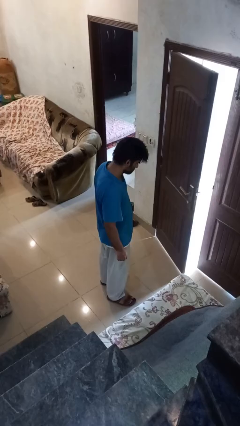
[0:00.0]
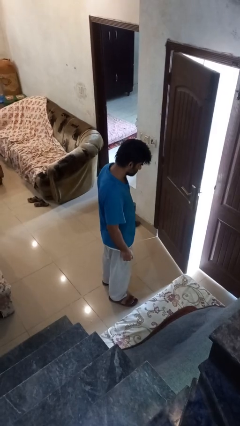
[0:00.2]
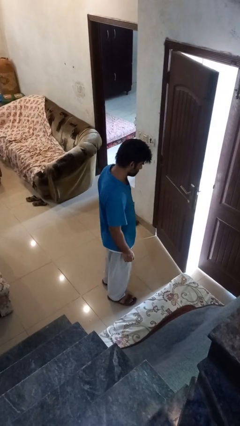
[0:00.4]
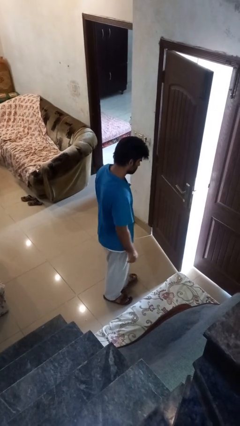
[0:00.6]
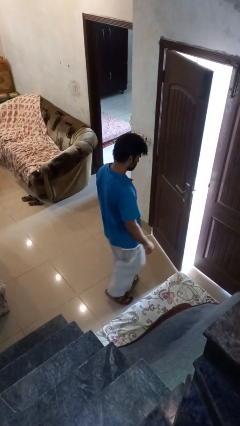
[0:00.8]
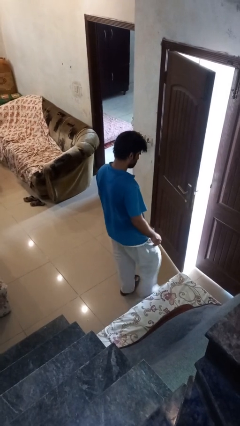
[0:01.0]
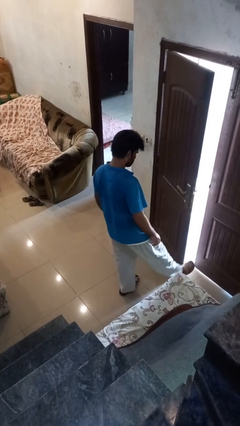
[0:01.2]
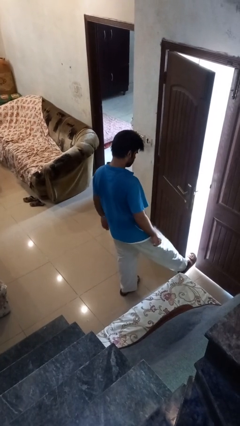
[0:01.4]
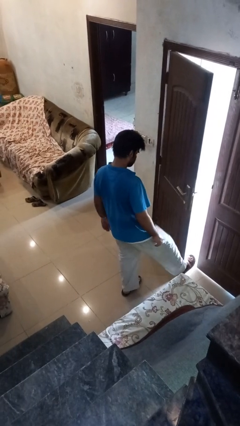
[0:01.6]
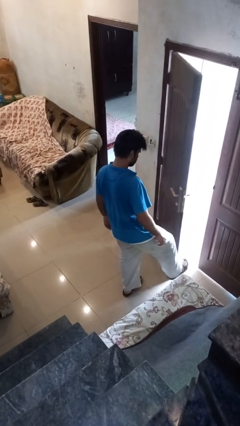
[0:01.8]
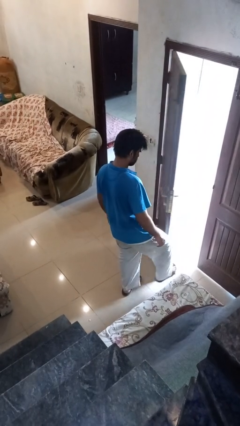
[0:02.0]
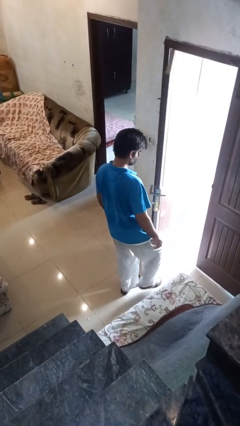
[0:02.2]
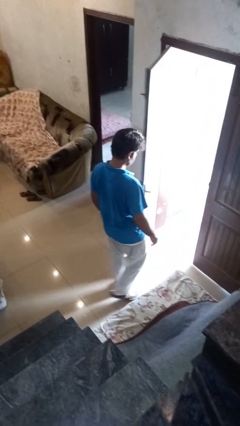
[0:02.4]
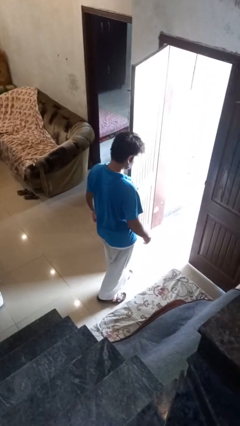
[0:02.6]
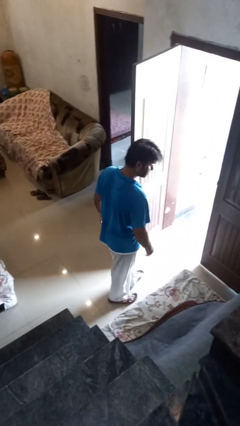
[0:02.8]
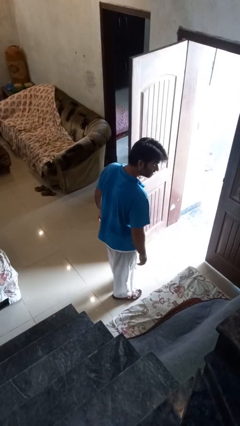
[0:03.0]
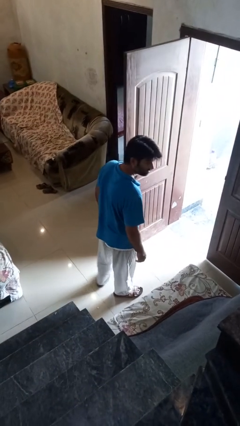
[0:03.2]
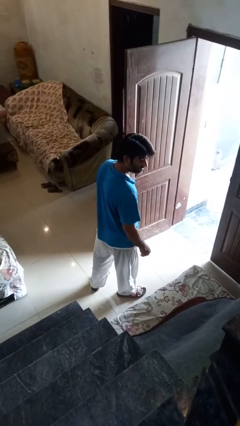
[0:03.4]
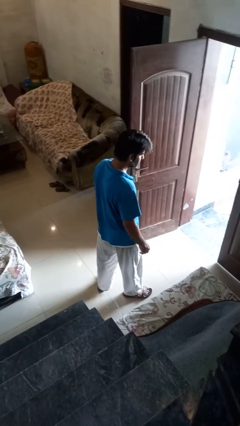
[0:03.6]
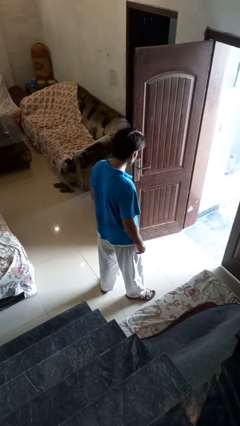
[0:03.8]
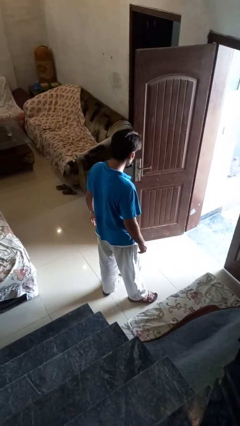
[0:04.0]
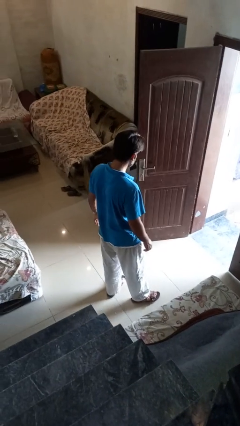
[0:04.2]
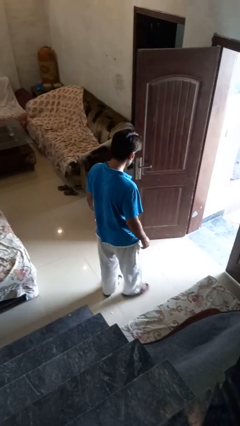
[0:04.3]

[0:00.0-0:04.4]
person opens facility door

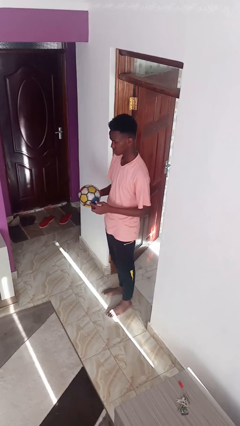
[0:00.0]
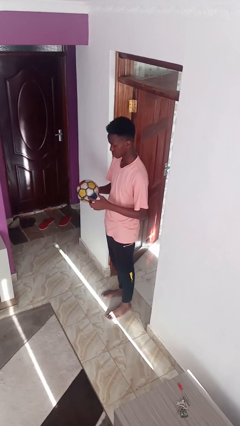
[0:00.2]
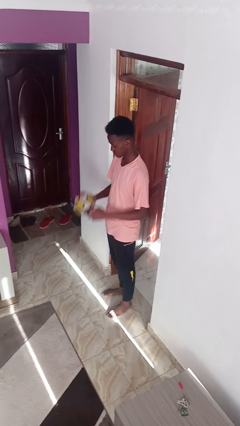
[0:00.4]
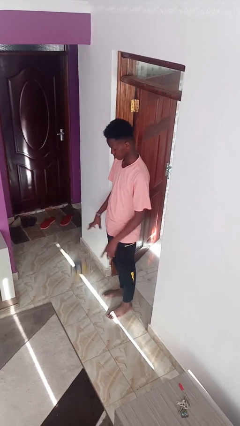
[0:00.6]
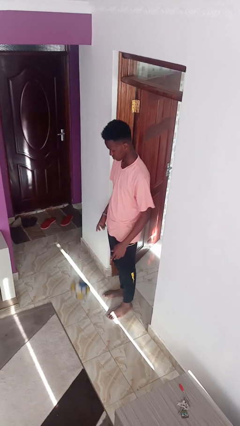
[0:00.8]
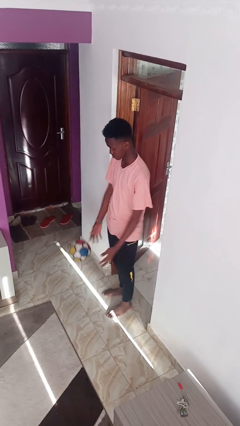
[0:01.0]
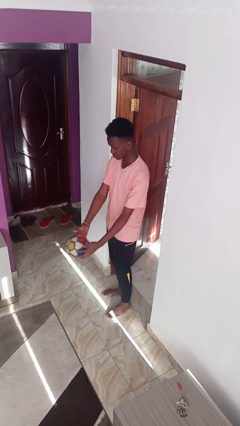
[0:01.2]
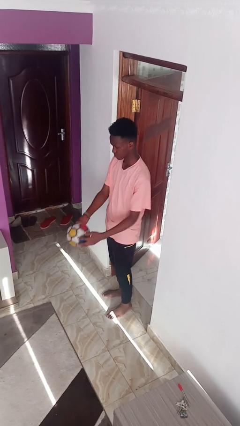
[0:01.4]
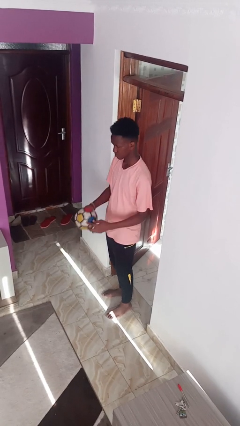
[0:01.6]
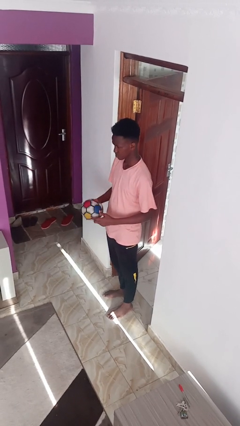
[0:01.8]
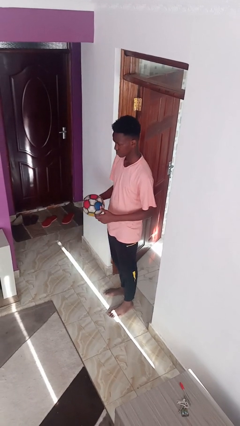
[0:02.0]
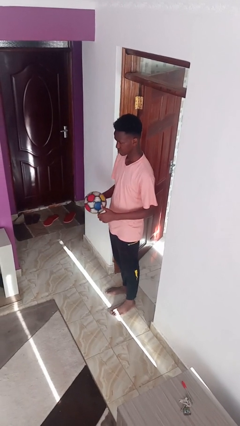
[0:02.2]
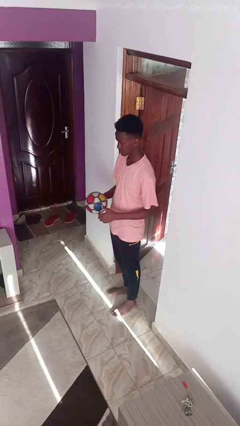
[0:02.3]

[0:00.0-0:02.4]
person bounces ball on floor

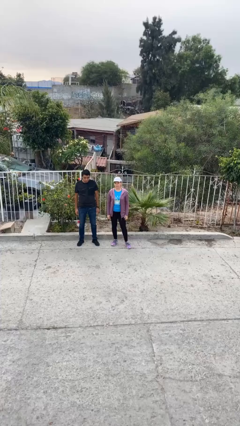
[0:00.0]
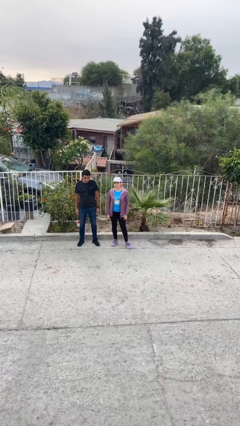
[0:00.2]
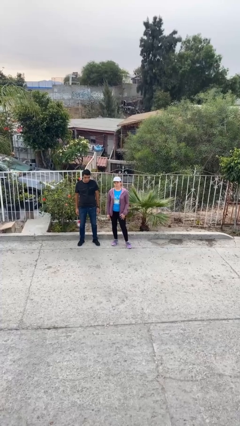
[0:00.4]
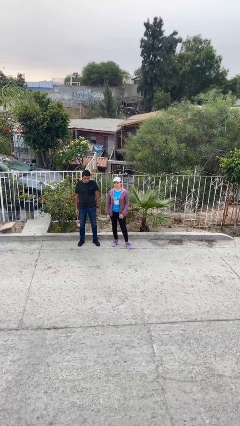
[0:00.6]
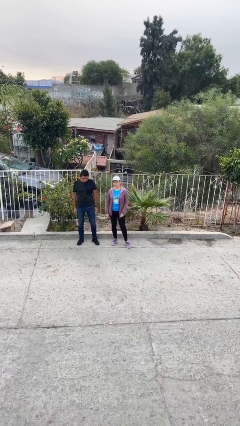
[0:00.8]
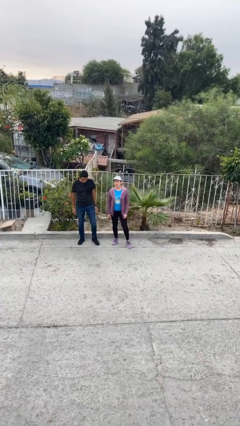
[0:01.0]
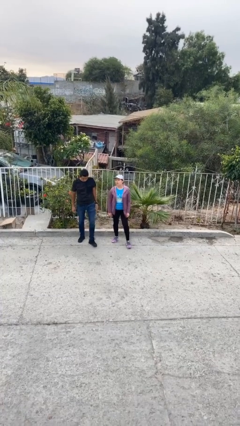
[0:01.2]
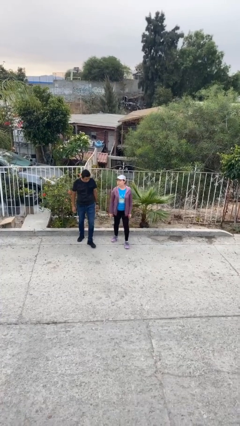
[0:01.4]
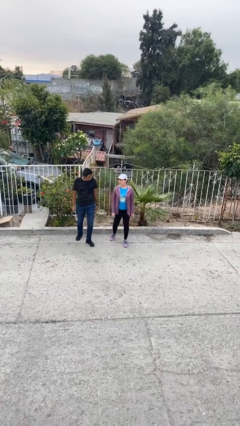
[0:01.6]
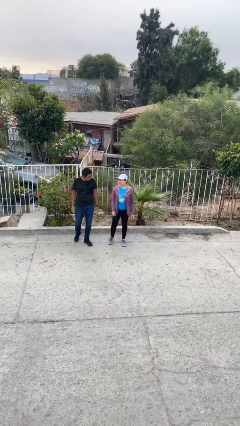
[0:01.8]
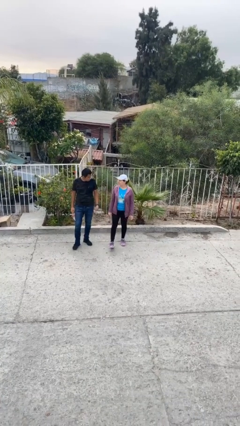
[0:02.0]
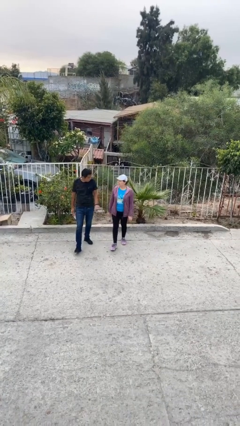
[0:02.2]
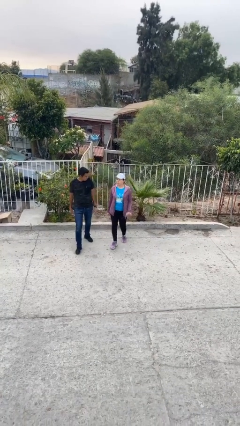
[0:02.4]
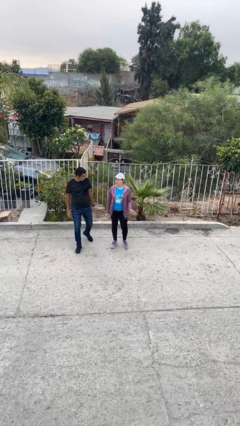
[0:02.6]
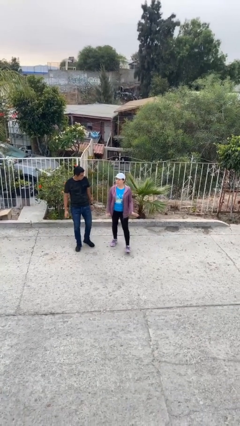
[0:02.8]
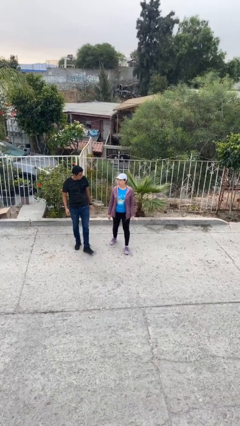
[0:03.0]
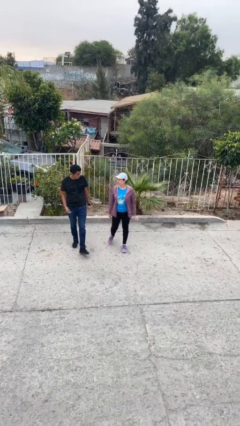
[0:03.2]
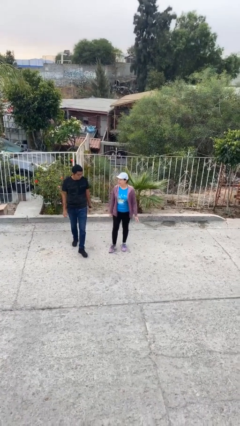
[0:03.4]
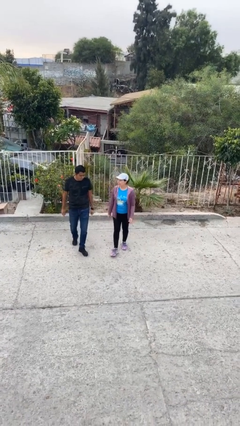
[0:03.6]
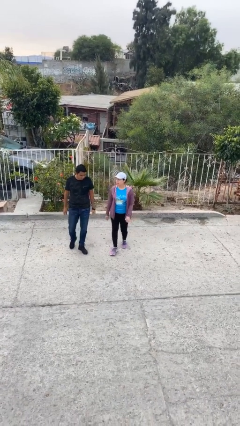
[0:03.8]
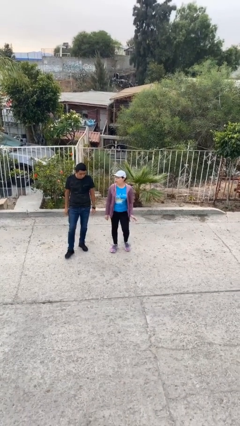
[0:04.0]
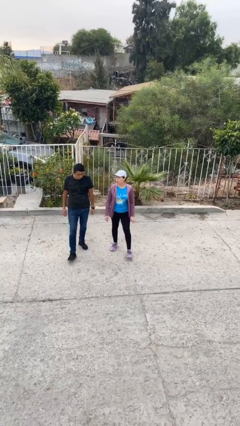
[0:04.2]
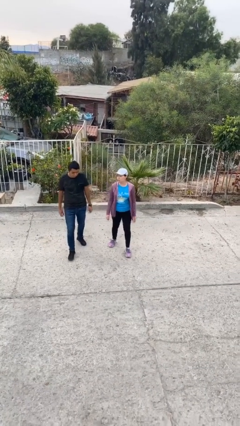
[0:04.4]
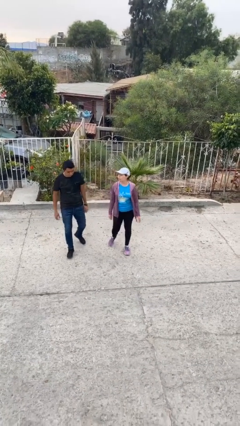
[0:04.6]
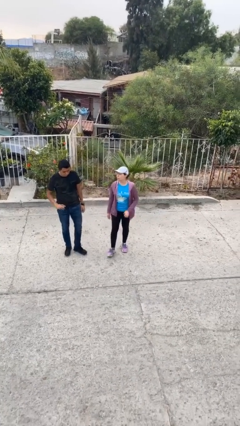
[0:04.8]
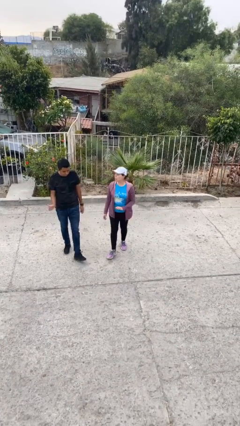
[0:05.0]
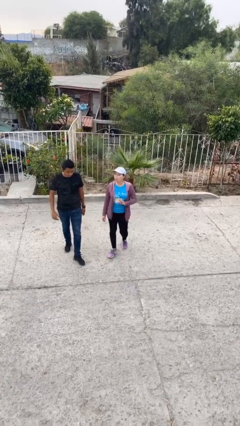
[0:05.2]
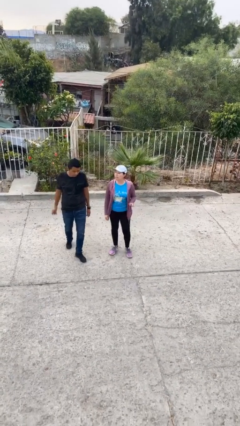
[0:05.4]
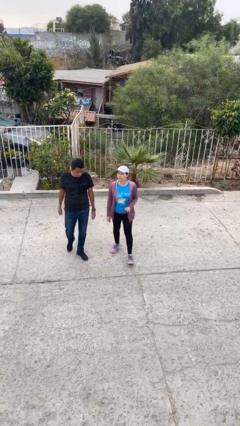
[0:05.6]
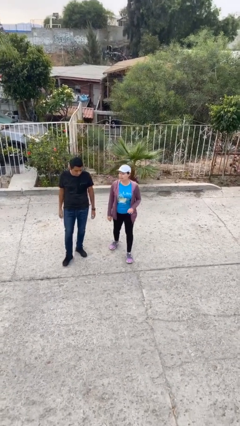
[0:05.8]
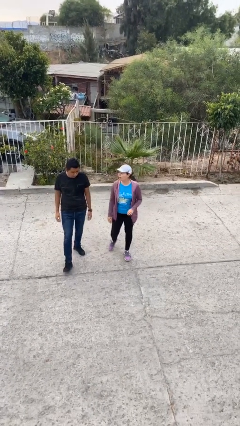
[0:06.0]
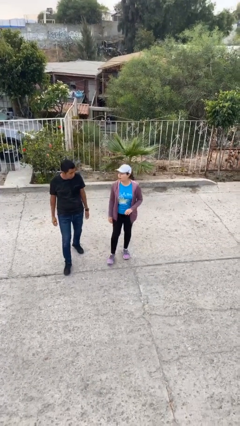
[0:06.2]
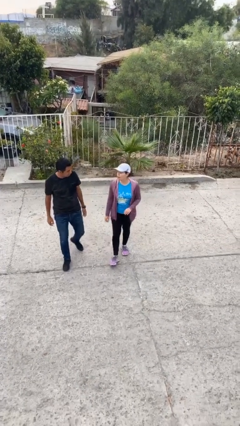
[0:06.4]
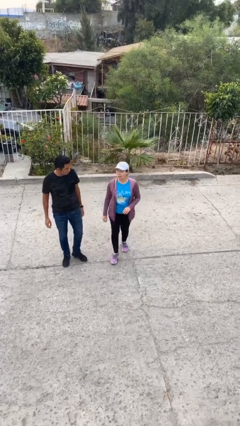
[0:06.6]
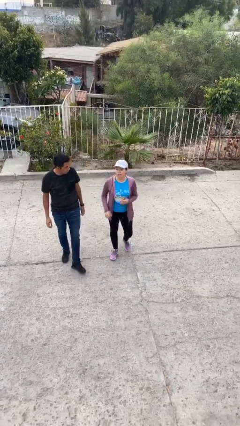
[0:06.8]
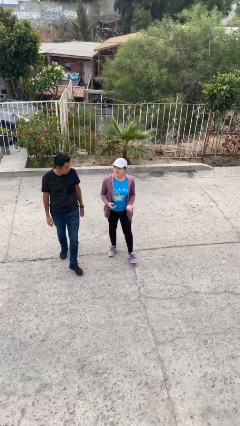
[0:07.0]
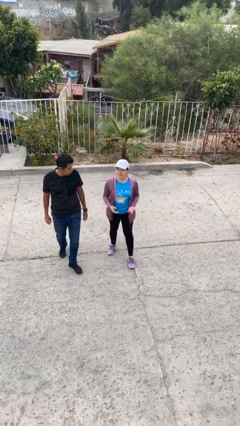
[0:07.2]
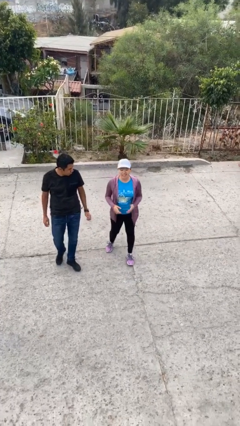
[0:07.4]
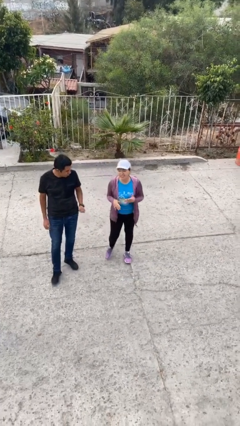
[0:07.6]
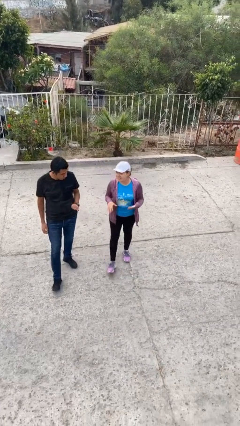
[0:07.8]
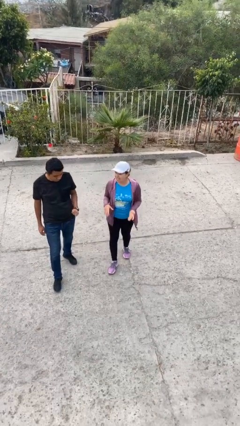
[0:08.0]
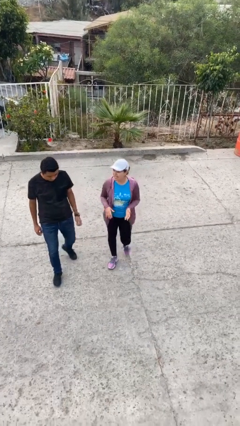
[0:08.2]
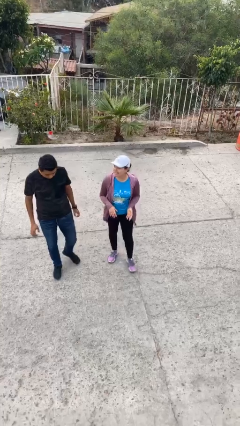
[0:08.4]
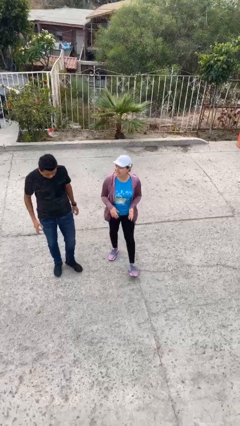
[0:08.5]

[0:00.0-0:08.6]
person talks to person

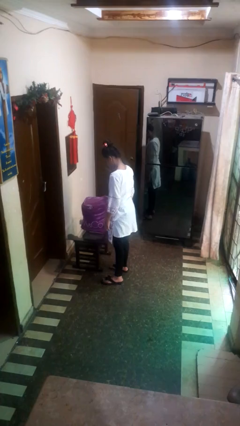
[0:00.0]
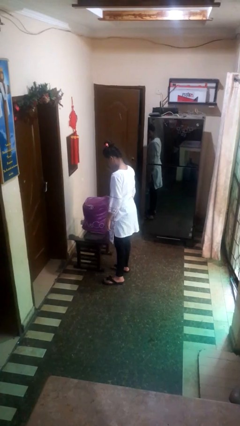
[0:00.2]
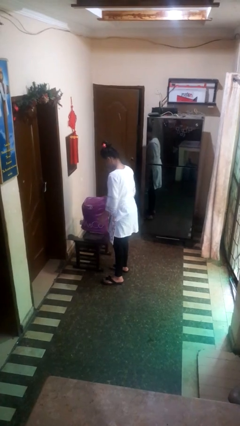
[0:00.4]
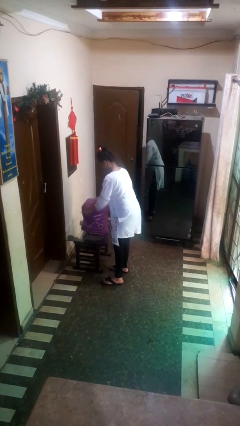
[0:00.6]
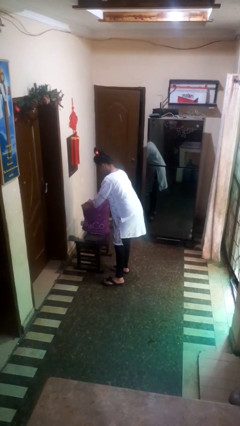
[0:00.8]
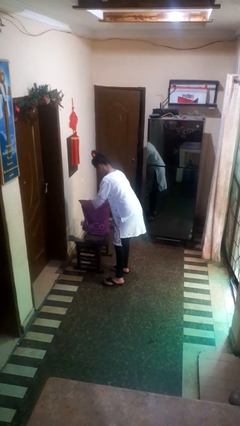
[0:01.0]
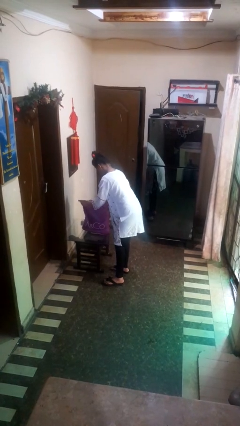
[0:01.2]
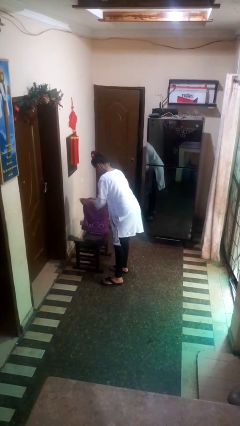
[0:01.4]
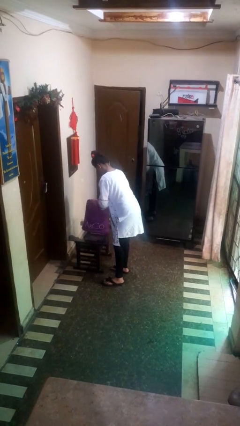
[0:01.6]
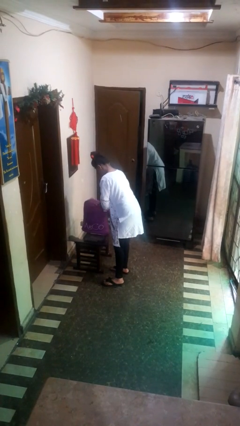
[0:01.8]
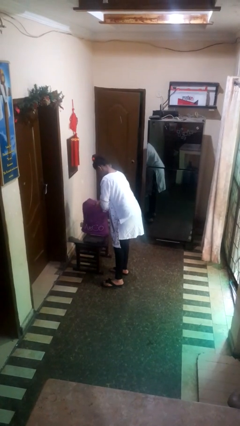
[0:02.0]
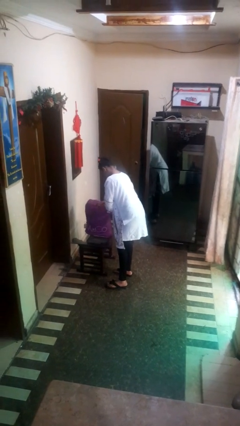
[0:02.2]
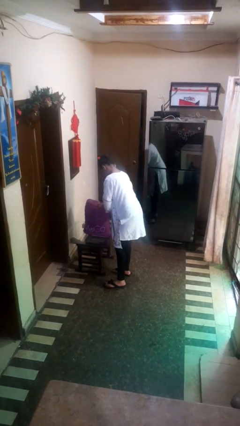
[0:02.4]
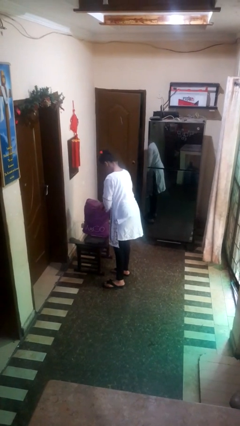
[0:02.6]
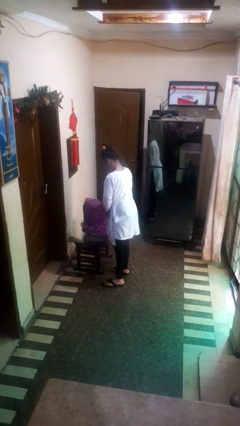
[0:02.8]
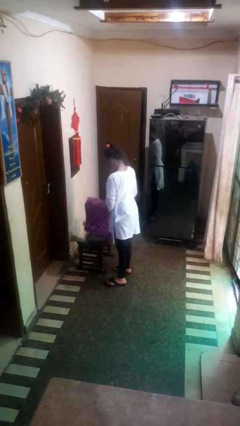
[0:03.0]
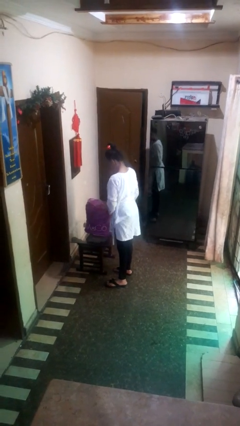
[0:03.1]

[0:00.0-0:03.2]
person searches in bag
